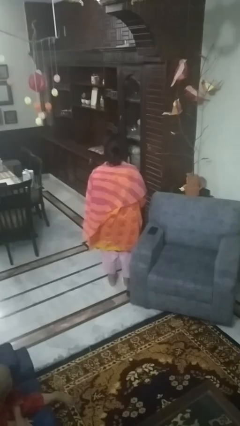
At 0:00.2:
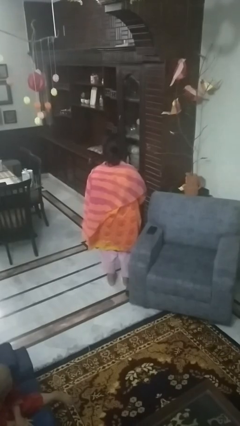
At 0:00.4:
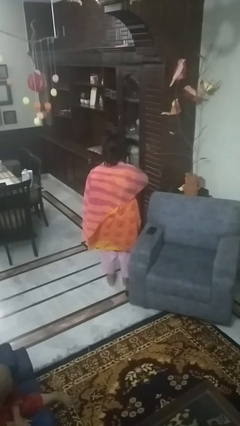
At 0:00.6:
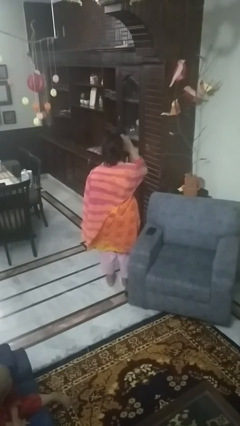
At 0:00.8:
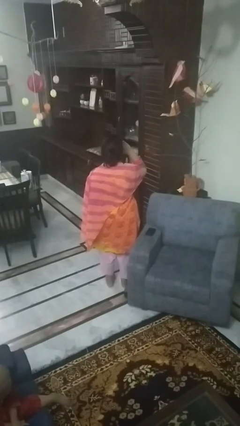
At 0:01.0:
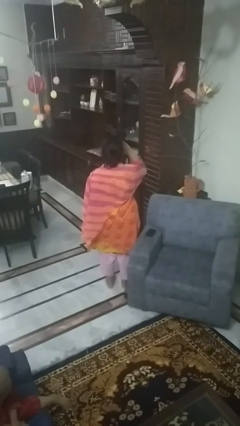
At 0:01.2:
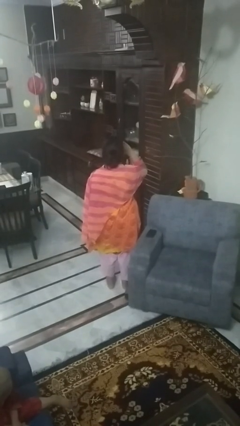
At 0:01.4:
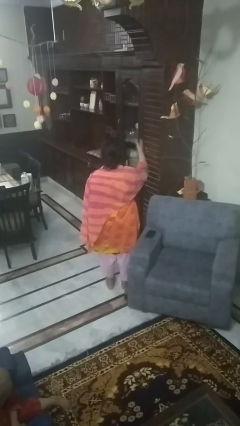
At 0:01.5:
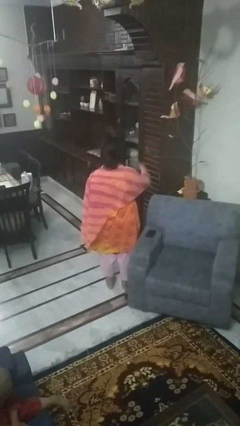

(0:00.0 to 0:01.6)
person salutes

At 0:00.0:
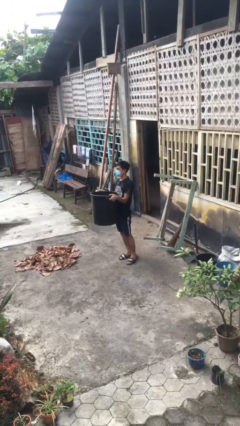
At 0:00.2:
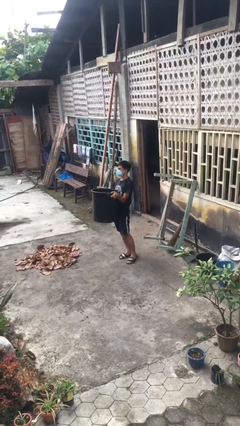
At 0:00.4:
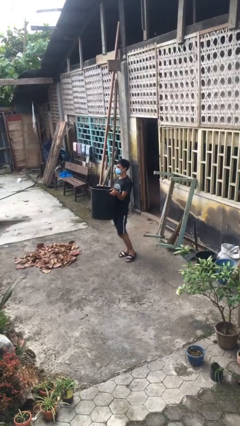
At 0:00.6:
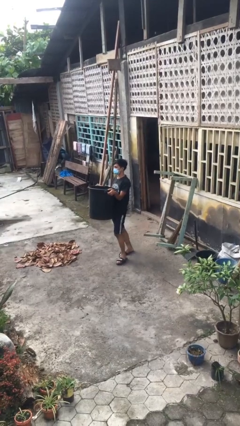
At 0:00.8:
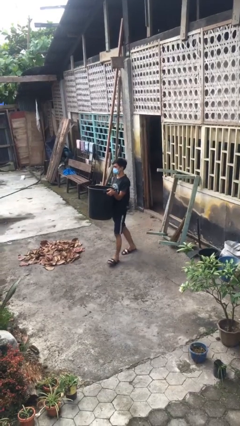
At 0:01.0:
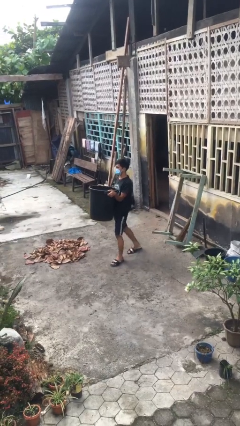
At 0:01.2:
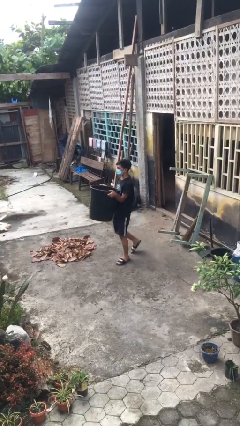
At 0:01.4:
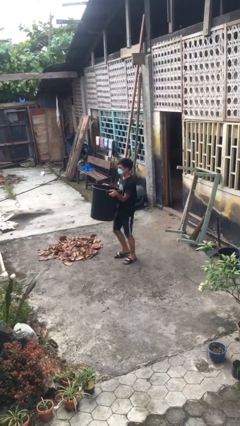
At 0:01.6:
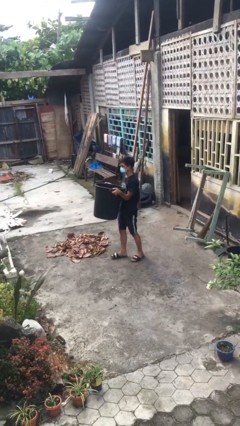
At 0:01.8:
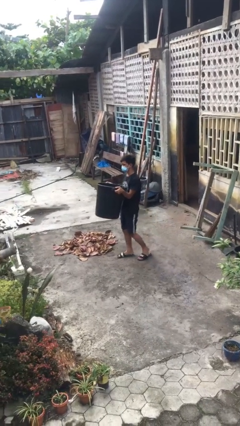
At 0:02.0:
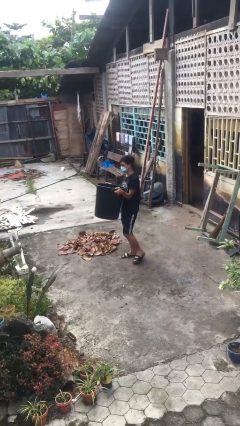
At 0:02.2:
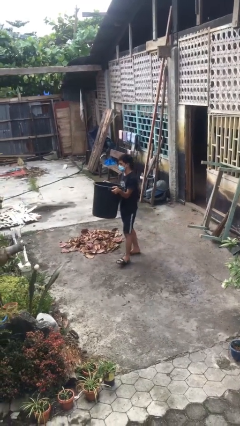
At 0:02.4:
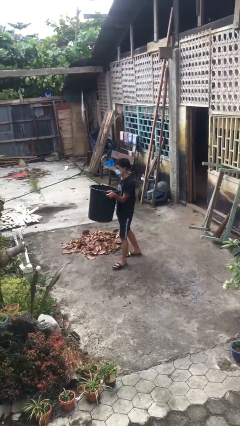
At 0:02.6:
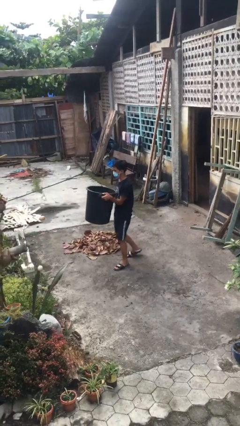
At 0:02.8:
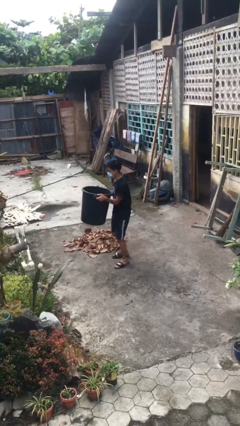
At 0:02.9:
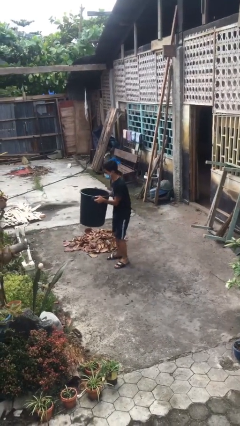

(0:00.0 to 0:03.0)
person carries heavy object

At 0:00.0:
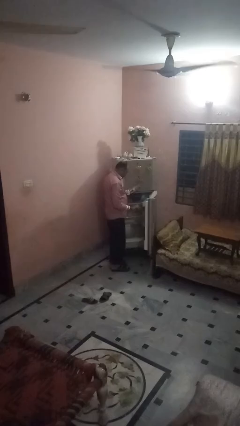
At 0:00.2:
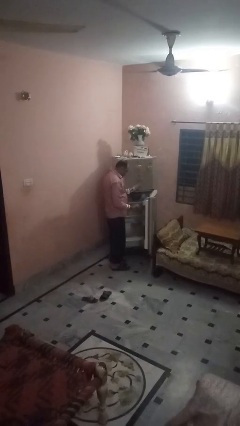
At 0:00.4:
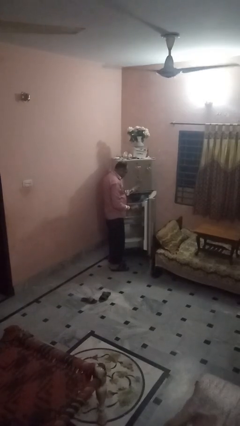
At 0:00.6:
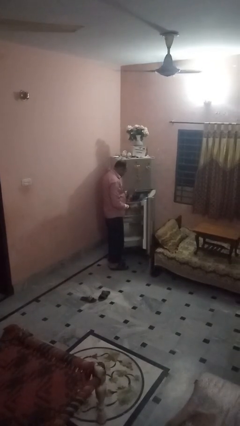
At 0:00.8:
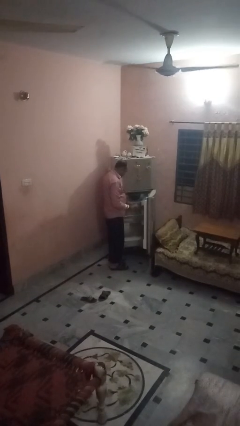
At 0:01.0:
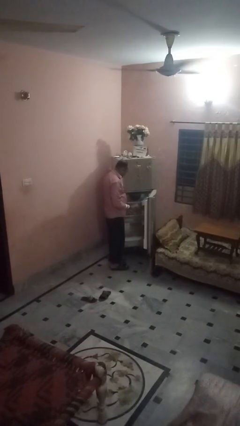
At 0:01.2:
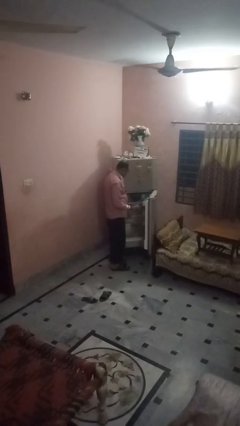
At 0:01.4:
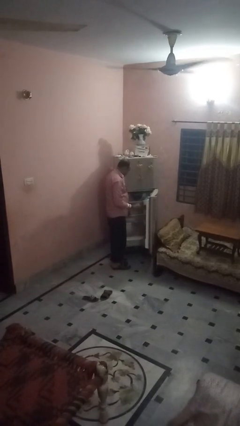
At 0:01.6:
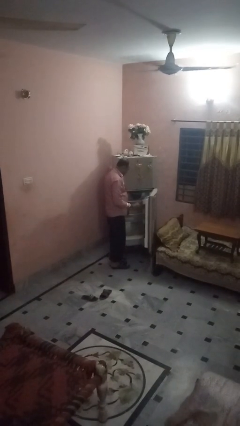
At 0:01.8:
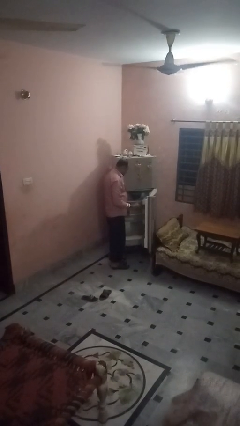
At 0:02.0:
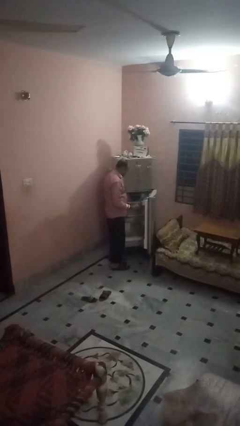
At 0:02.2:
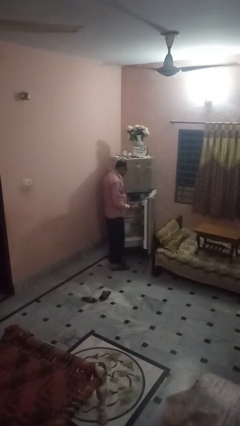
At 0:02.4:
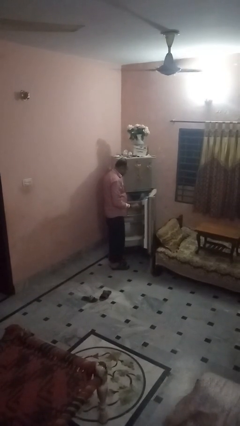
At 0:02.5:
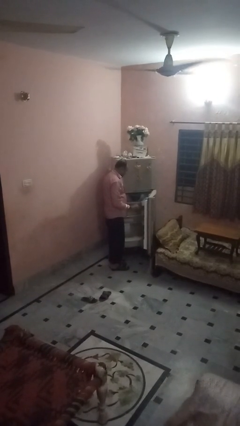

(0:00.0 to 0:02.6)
person takes object from refrigerator

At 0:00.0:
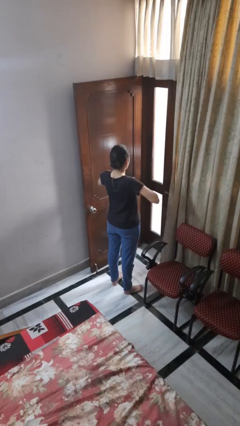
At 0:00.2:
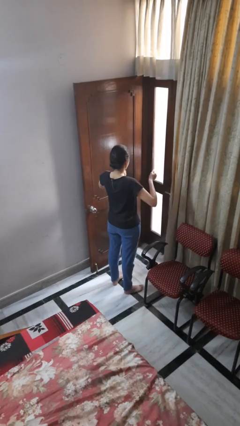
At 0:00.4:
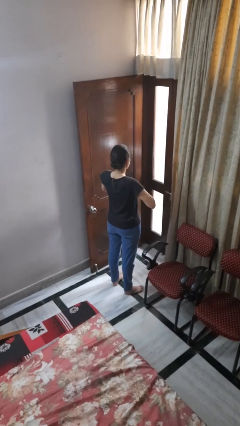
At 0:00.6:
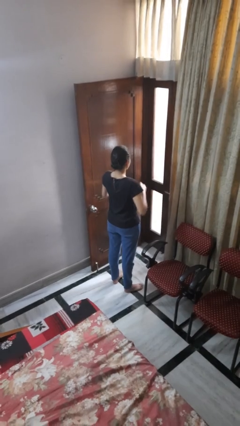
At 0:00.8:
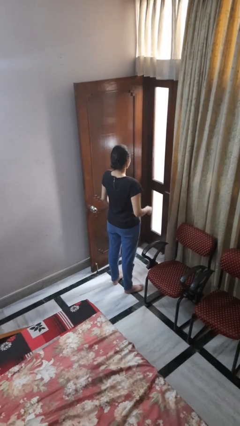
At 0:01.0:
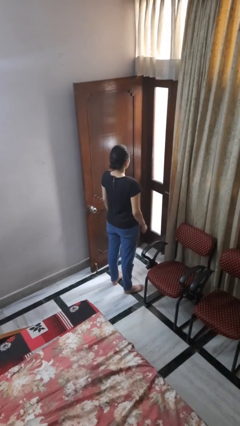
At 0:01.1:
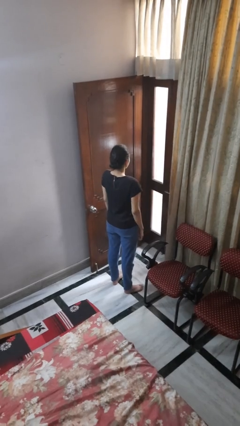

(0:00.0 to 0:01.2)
person drums on chest

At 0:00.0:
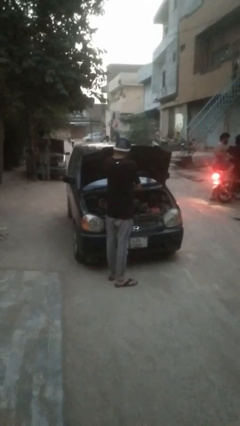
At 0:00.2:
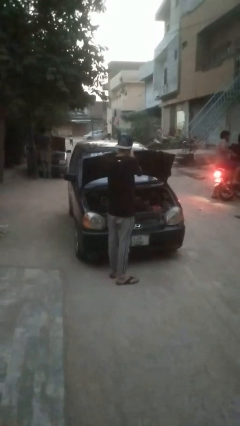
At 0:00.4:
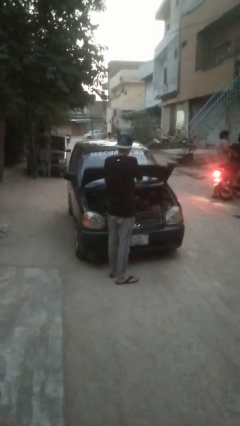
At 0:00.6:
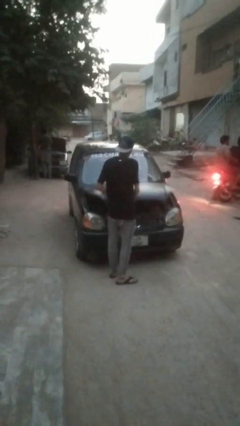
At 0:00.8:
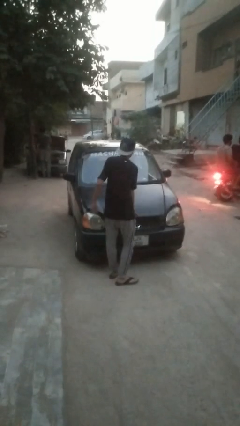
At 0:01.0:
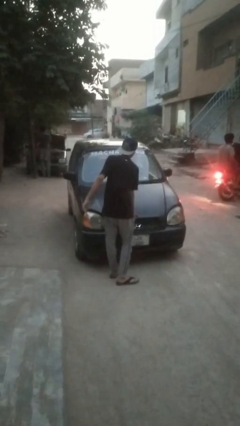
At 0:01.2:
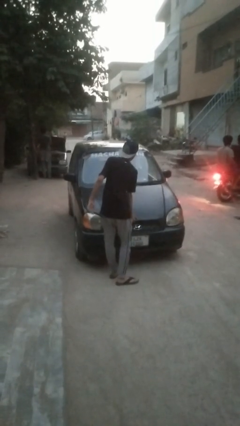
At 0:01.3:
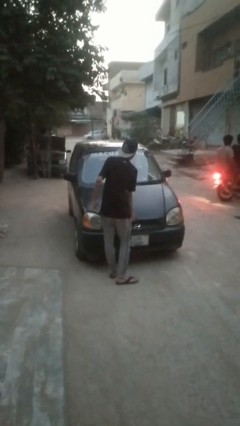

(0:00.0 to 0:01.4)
person closes car hood

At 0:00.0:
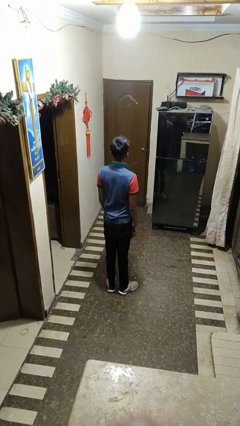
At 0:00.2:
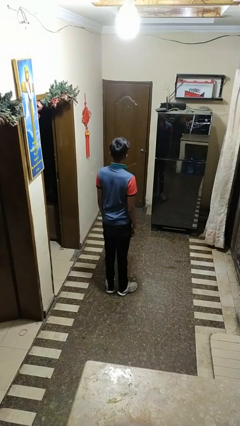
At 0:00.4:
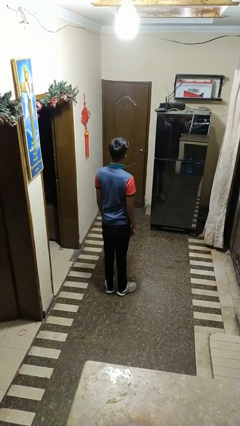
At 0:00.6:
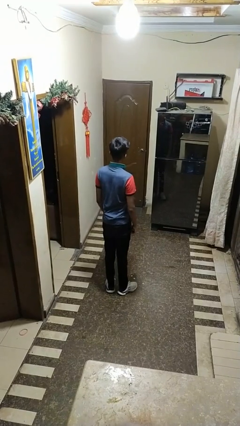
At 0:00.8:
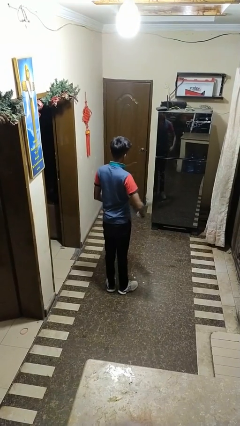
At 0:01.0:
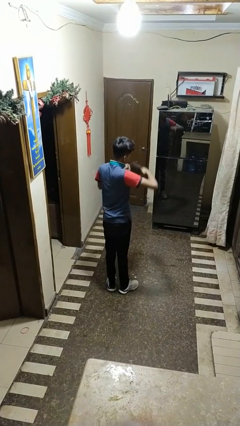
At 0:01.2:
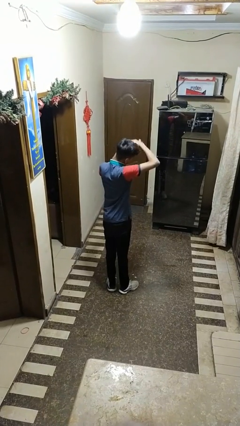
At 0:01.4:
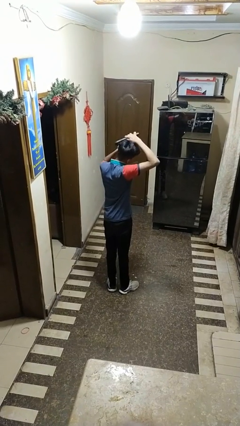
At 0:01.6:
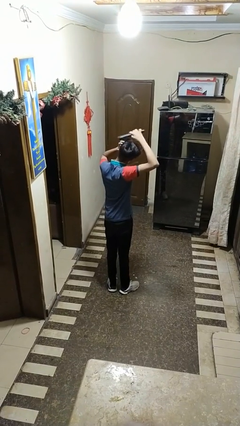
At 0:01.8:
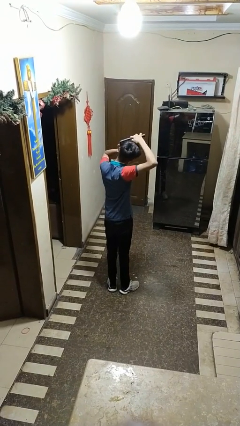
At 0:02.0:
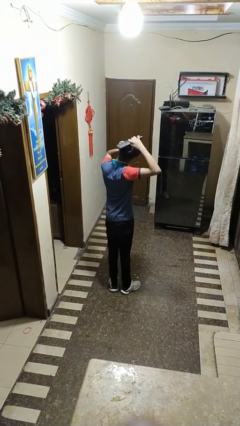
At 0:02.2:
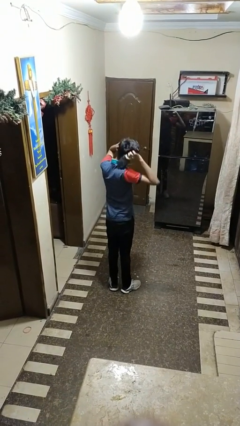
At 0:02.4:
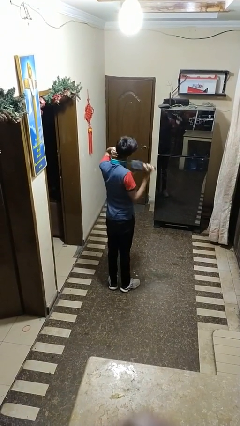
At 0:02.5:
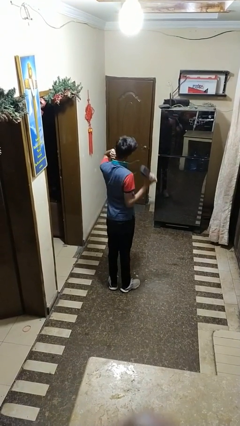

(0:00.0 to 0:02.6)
person brushes hair

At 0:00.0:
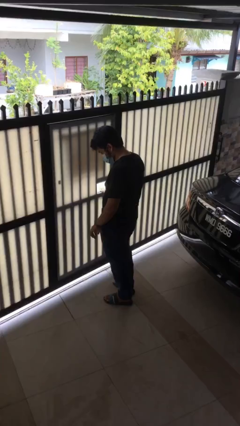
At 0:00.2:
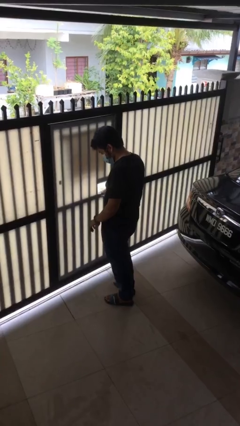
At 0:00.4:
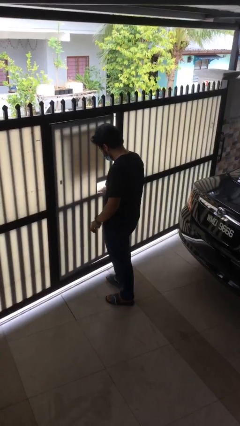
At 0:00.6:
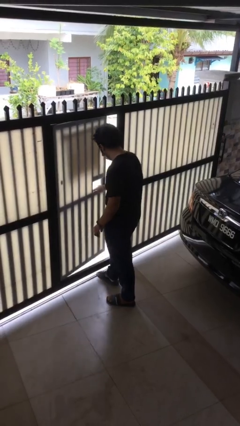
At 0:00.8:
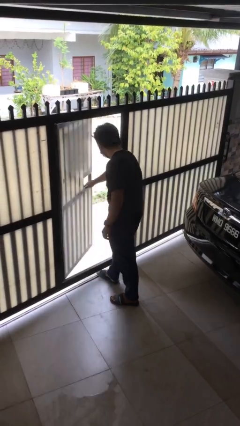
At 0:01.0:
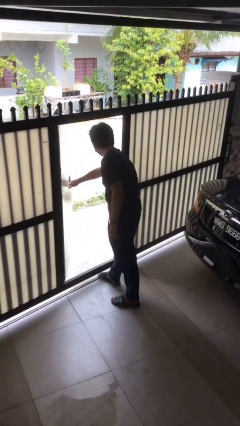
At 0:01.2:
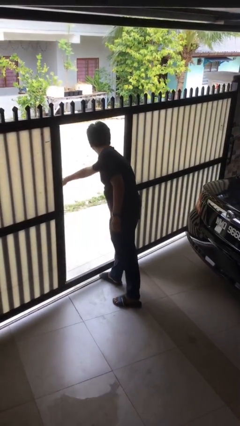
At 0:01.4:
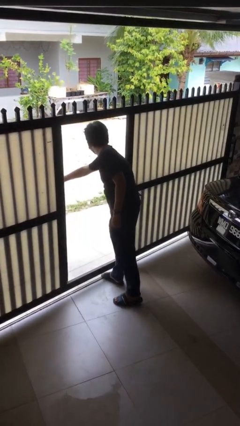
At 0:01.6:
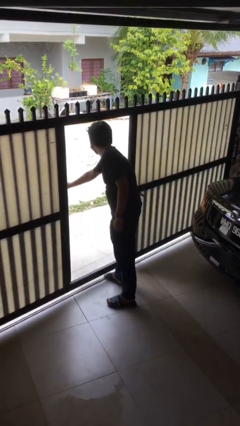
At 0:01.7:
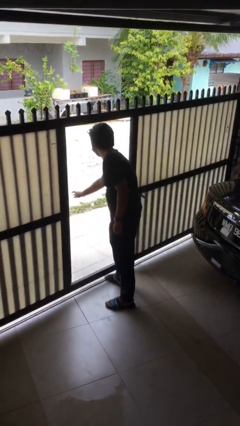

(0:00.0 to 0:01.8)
person opens gate

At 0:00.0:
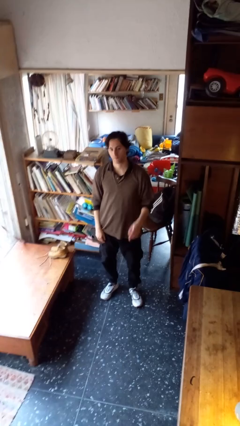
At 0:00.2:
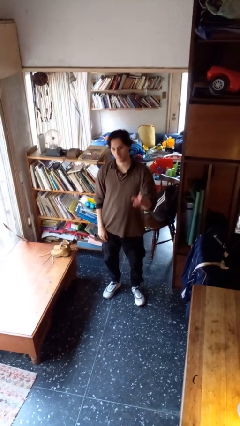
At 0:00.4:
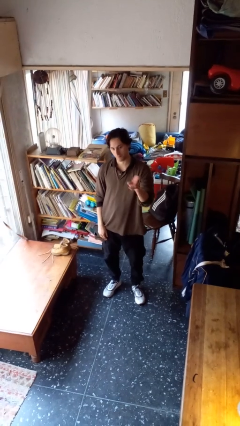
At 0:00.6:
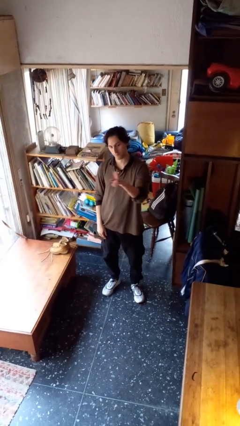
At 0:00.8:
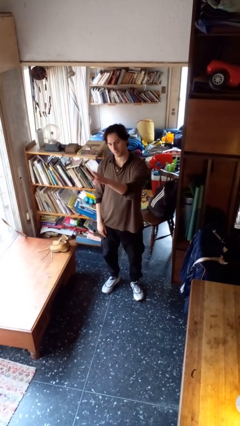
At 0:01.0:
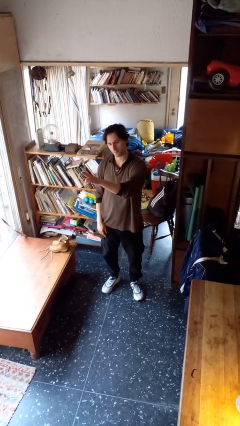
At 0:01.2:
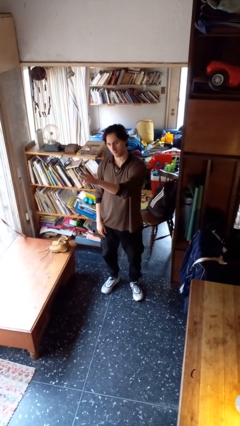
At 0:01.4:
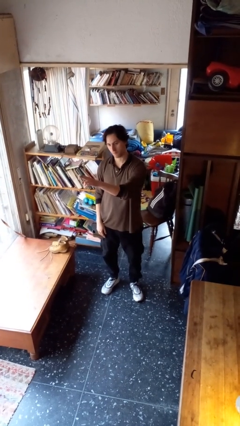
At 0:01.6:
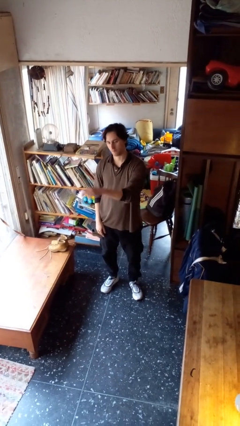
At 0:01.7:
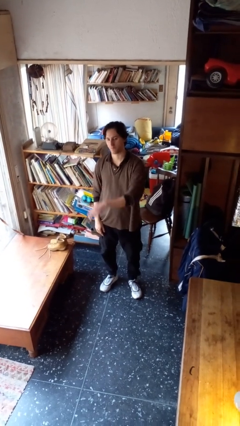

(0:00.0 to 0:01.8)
person gestures swipe right

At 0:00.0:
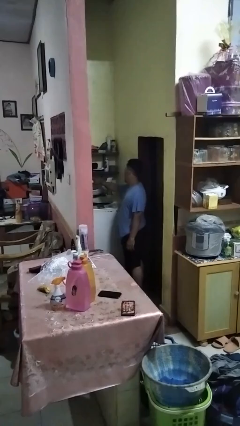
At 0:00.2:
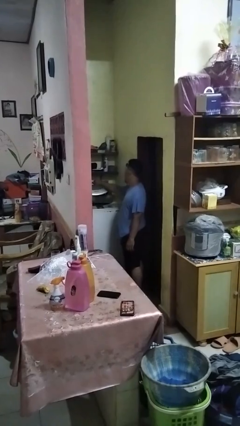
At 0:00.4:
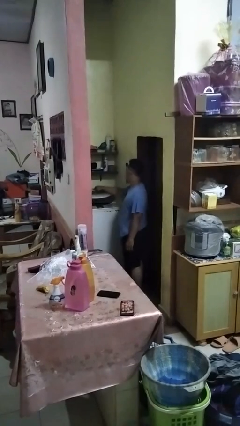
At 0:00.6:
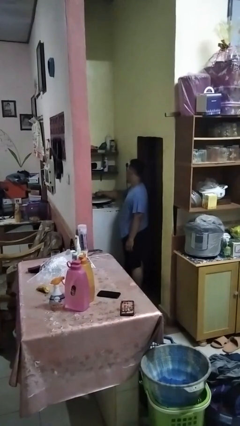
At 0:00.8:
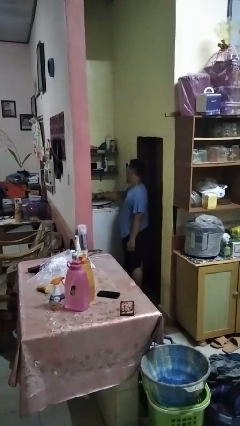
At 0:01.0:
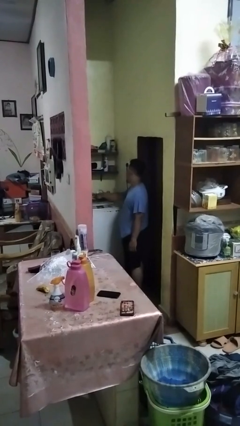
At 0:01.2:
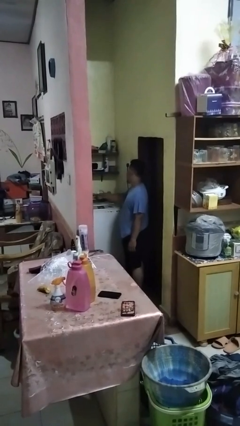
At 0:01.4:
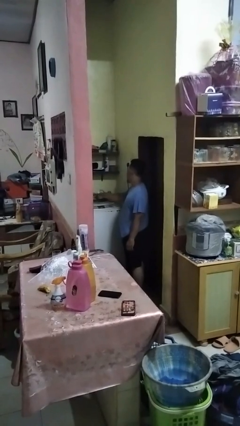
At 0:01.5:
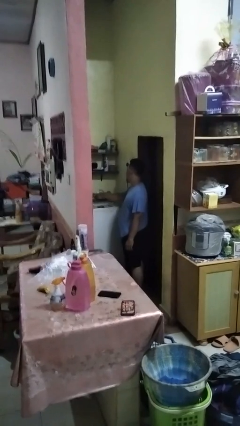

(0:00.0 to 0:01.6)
person closes clothes washer
